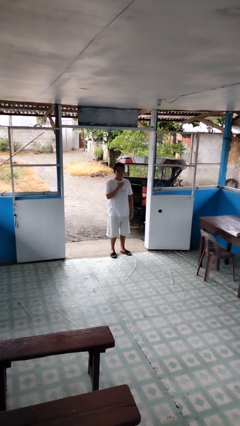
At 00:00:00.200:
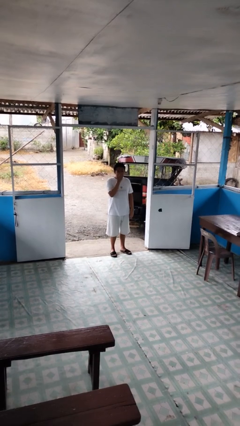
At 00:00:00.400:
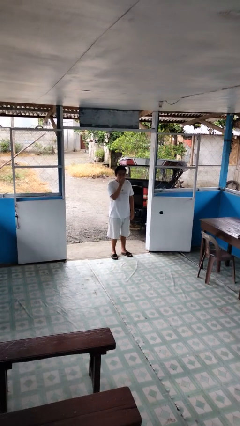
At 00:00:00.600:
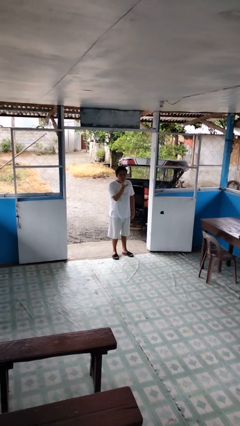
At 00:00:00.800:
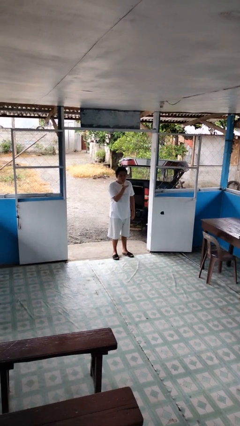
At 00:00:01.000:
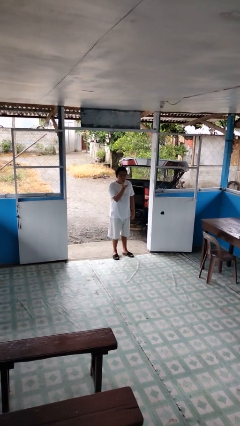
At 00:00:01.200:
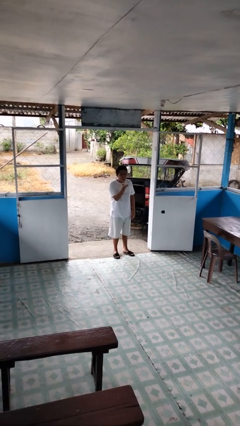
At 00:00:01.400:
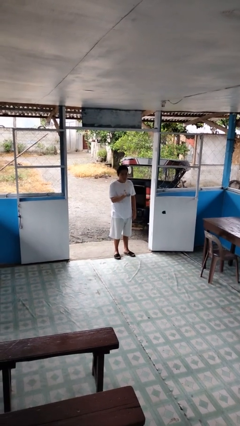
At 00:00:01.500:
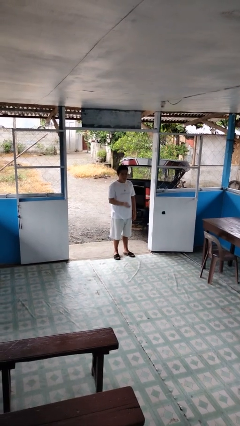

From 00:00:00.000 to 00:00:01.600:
person gestures blow kiss

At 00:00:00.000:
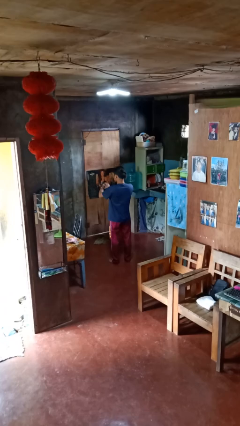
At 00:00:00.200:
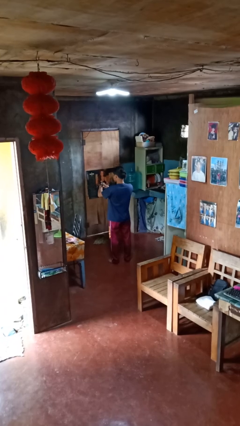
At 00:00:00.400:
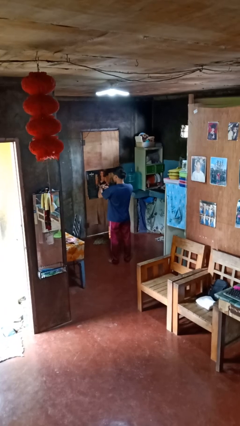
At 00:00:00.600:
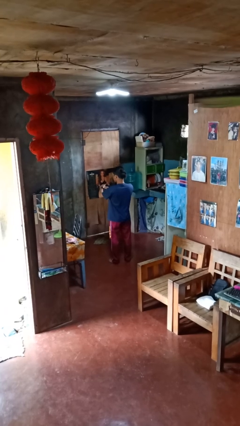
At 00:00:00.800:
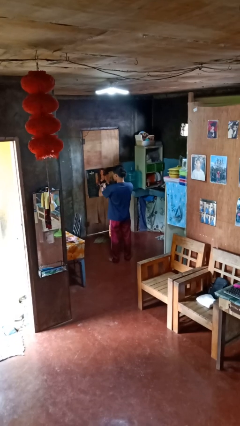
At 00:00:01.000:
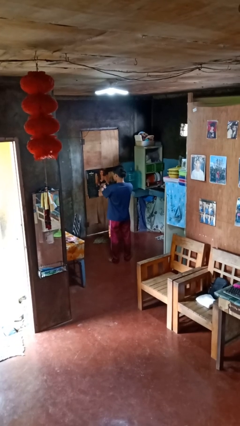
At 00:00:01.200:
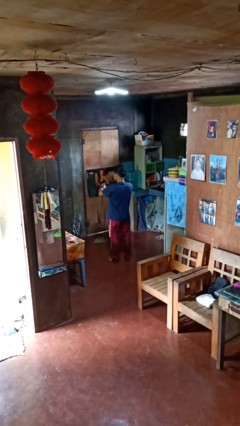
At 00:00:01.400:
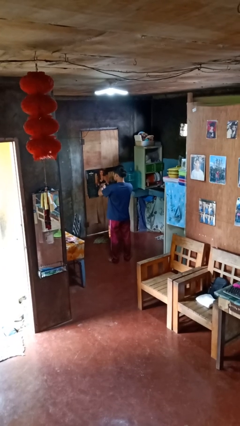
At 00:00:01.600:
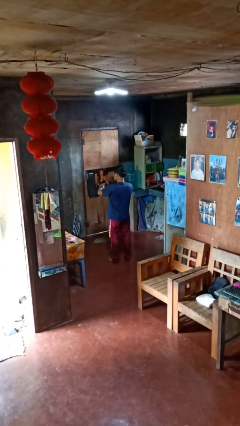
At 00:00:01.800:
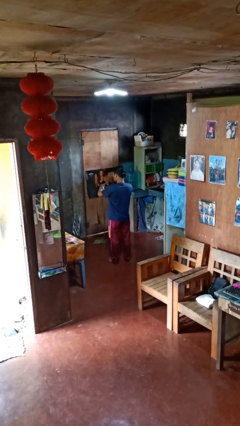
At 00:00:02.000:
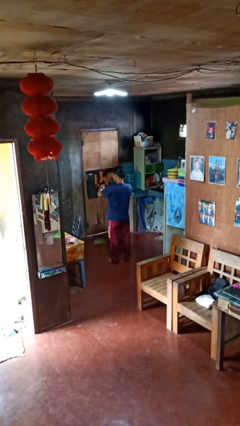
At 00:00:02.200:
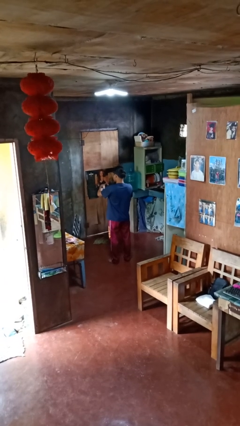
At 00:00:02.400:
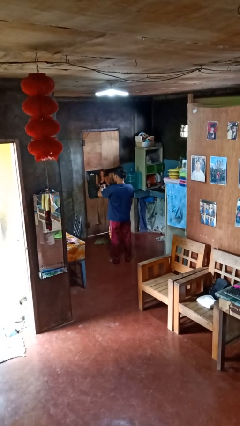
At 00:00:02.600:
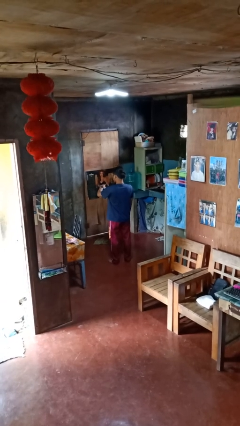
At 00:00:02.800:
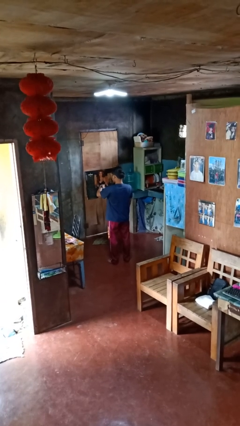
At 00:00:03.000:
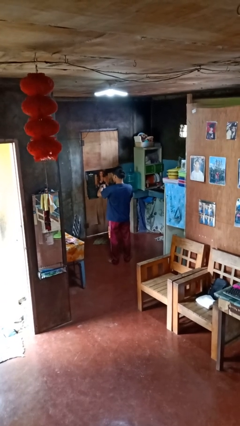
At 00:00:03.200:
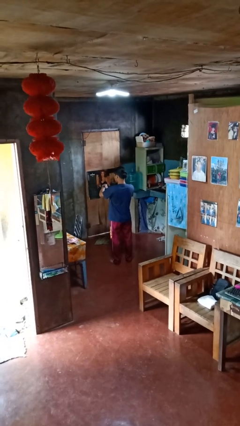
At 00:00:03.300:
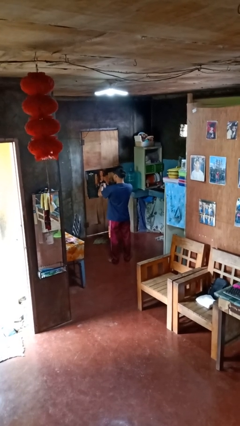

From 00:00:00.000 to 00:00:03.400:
person puts on wristwatch

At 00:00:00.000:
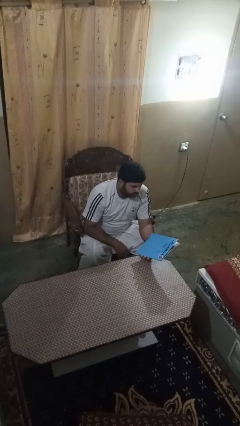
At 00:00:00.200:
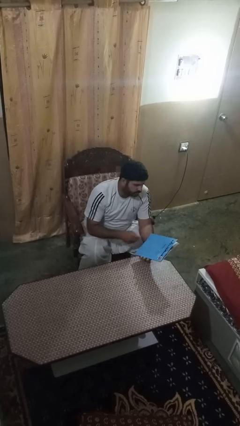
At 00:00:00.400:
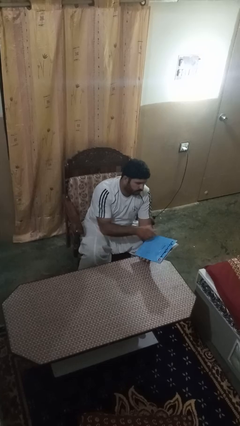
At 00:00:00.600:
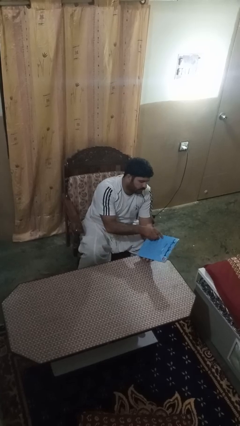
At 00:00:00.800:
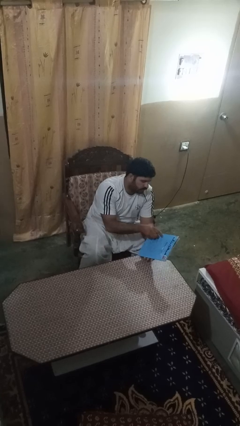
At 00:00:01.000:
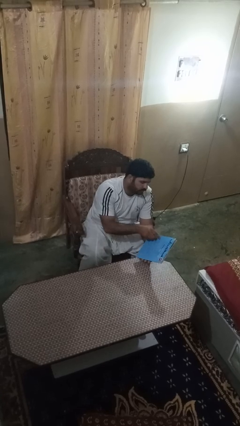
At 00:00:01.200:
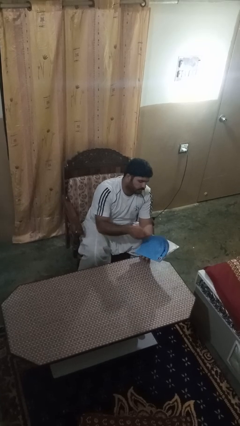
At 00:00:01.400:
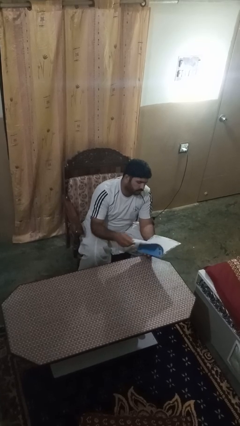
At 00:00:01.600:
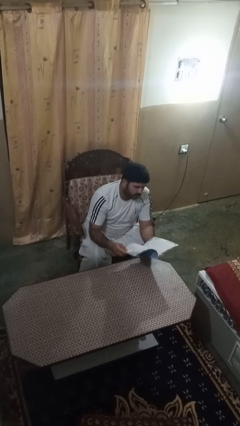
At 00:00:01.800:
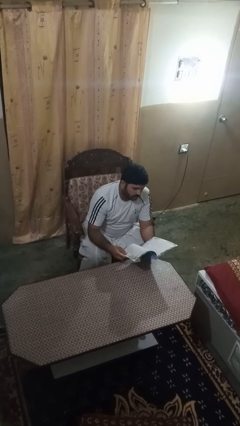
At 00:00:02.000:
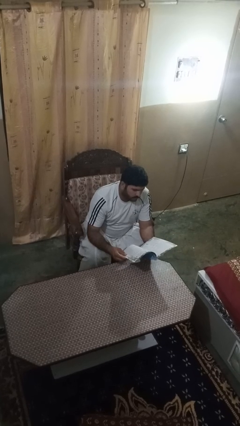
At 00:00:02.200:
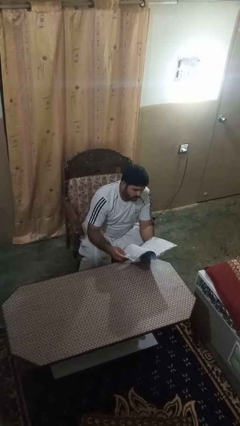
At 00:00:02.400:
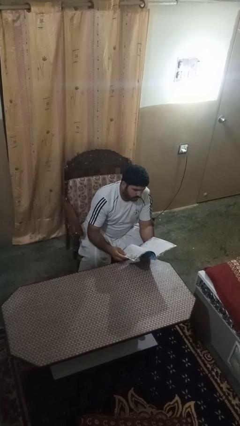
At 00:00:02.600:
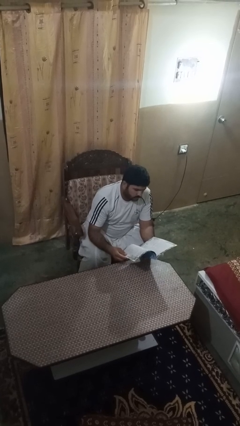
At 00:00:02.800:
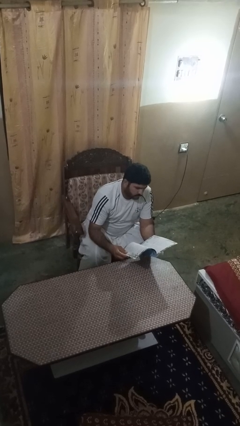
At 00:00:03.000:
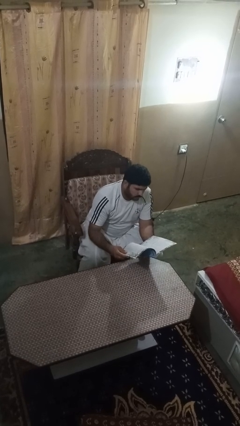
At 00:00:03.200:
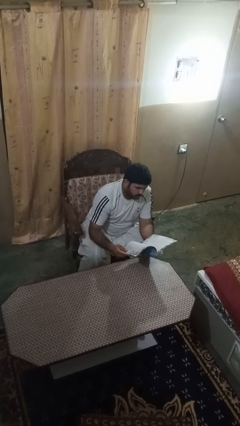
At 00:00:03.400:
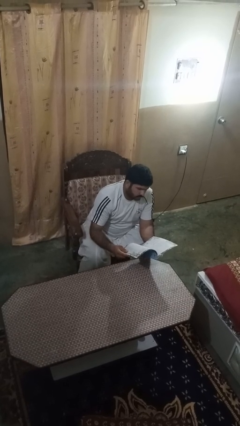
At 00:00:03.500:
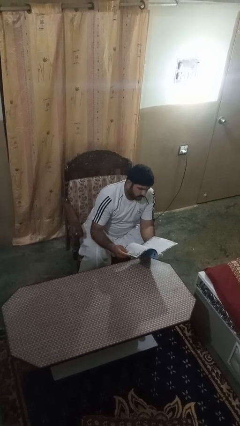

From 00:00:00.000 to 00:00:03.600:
person reads magazine

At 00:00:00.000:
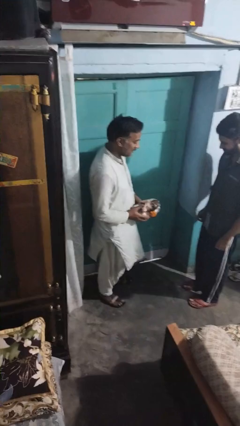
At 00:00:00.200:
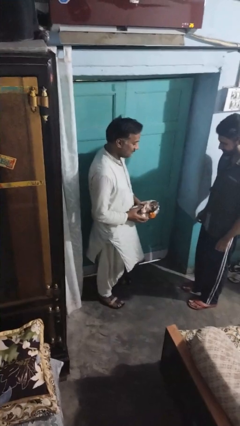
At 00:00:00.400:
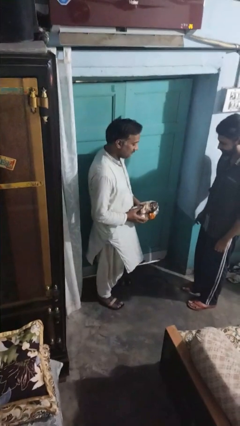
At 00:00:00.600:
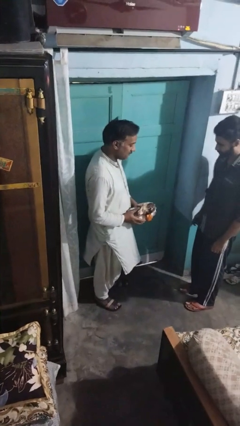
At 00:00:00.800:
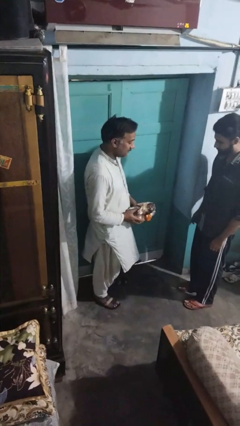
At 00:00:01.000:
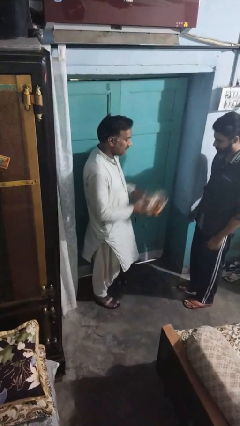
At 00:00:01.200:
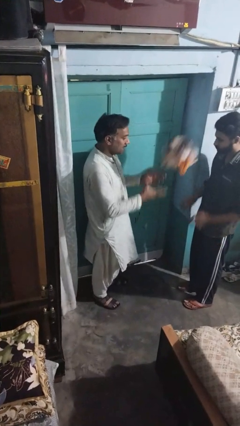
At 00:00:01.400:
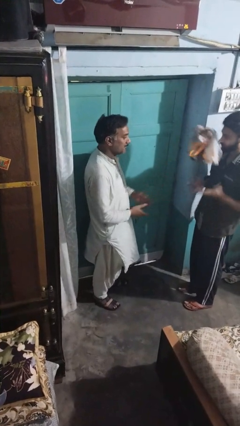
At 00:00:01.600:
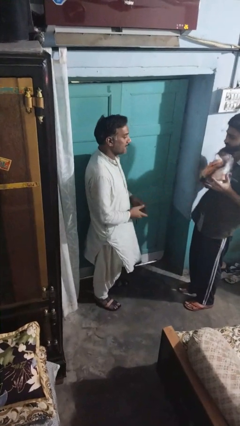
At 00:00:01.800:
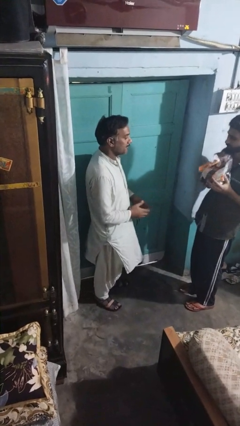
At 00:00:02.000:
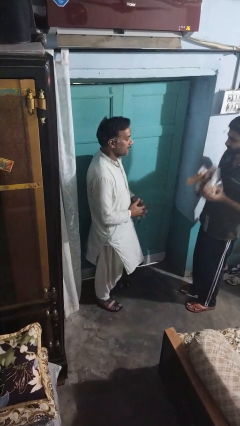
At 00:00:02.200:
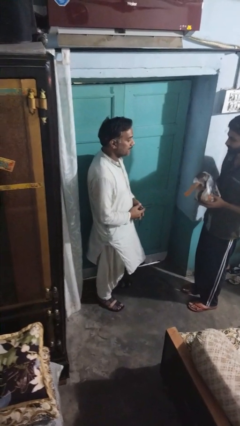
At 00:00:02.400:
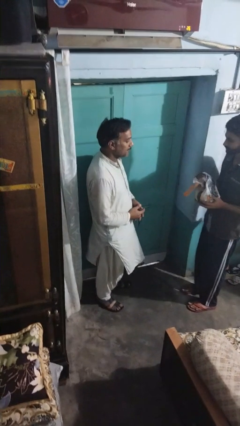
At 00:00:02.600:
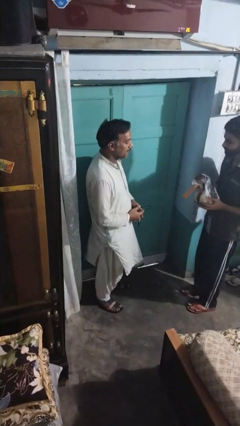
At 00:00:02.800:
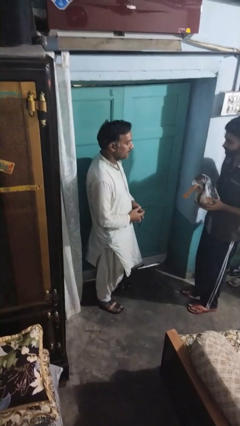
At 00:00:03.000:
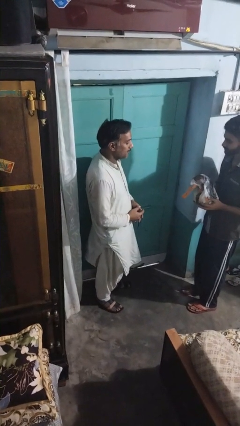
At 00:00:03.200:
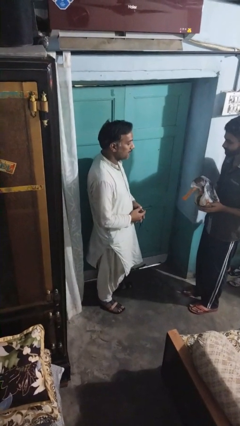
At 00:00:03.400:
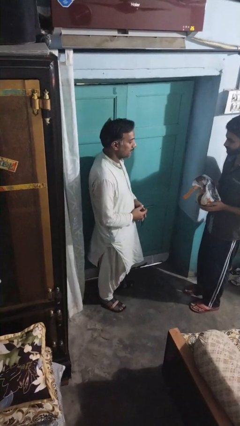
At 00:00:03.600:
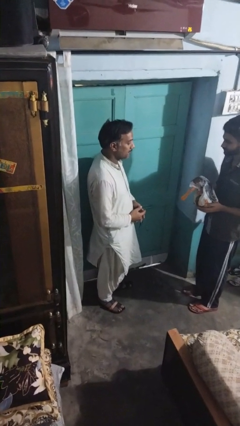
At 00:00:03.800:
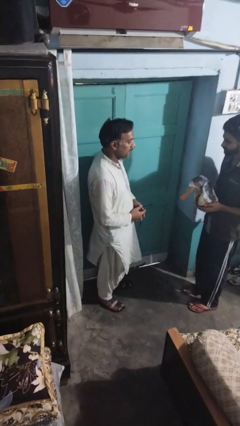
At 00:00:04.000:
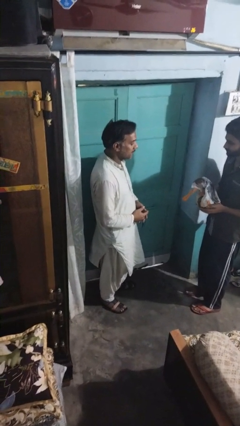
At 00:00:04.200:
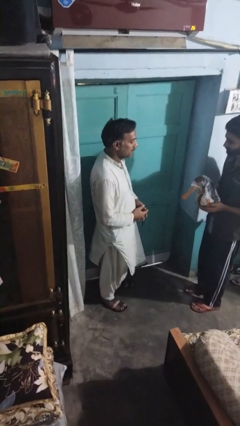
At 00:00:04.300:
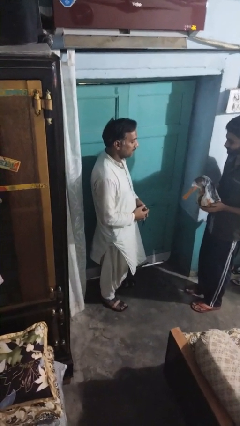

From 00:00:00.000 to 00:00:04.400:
person throws object to person

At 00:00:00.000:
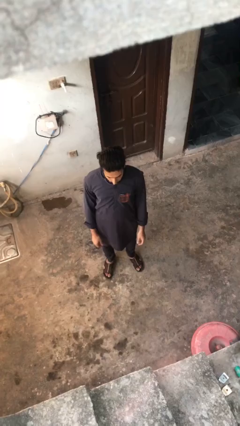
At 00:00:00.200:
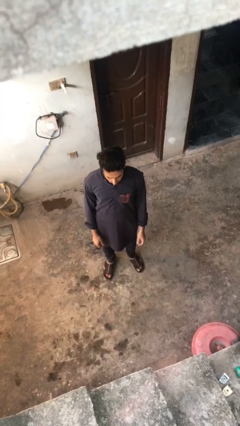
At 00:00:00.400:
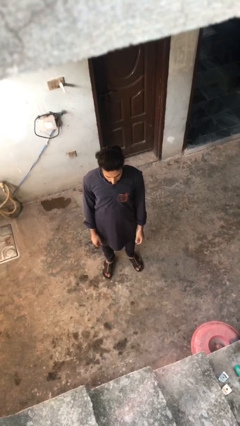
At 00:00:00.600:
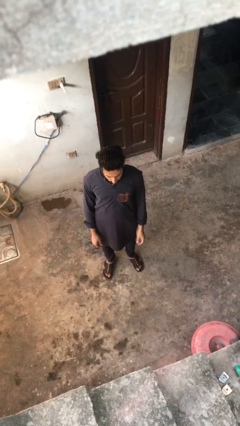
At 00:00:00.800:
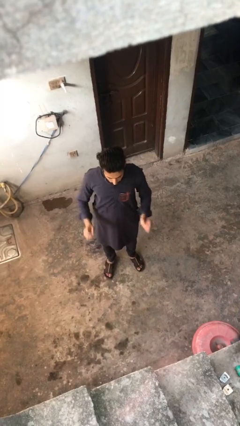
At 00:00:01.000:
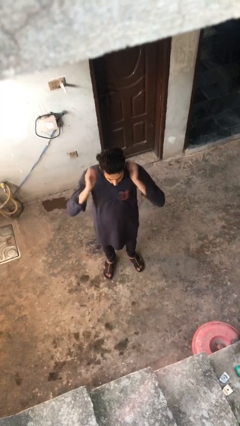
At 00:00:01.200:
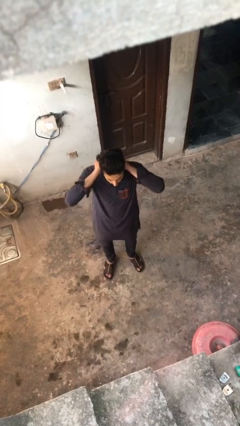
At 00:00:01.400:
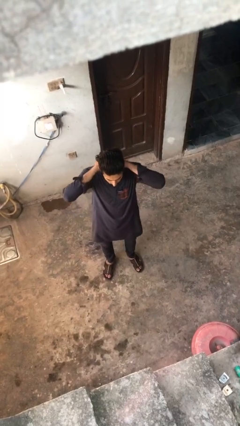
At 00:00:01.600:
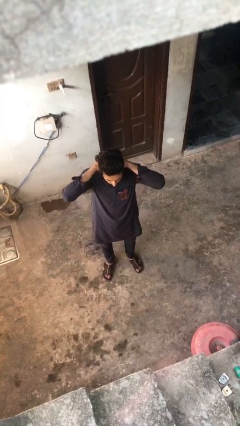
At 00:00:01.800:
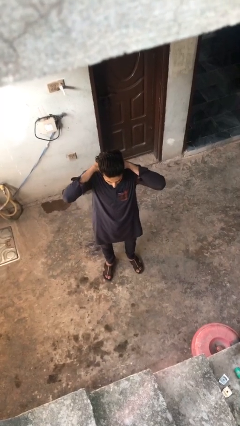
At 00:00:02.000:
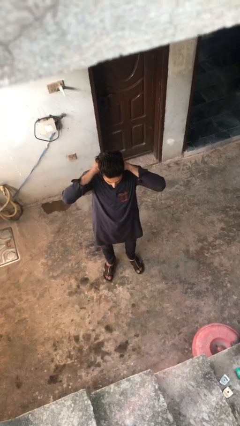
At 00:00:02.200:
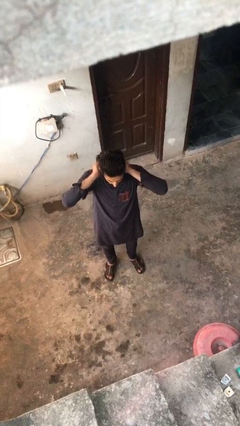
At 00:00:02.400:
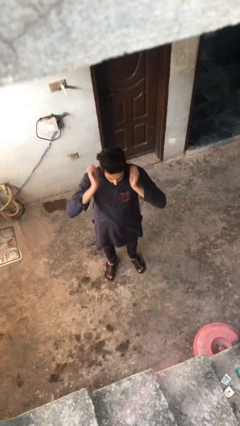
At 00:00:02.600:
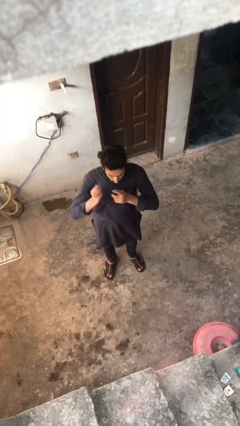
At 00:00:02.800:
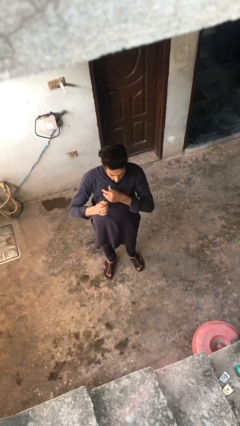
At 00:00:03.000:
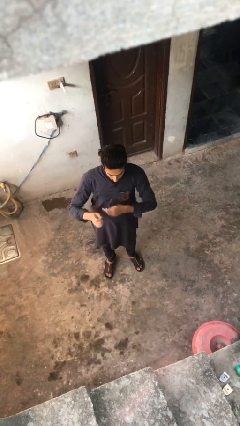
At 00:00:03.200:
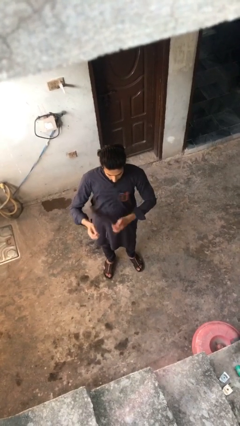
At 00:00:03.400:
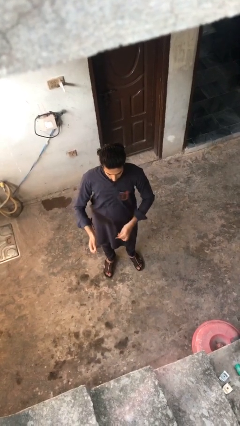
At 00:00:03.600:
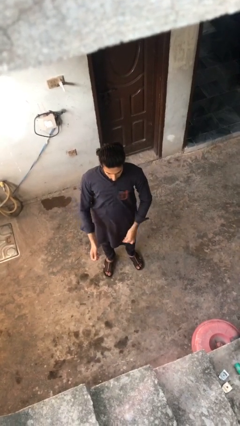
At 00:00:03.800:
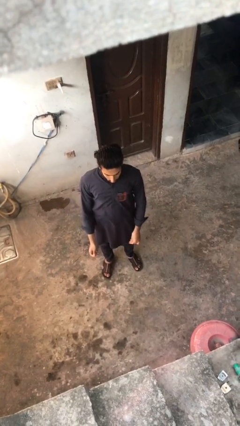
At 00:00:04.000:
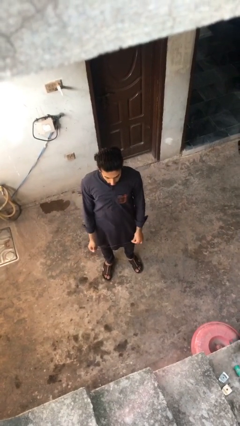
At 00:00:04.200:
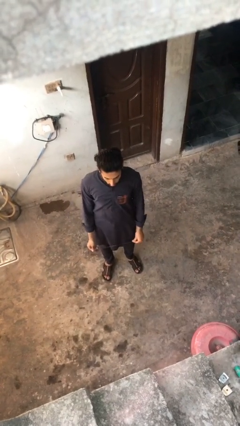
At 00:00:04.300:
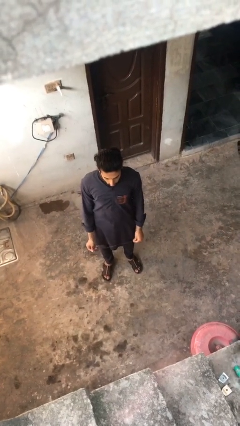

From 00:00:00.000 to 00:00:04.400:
person takes off necklace
